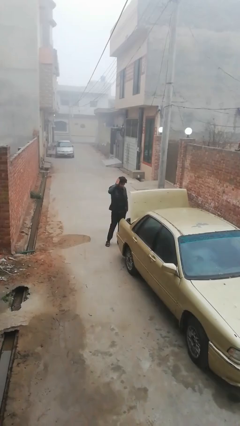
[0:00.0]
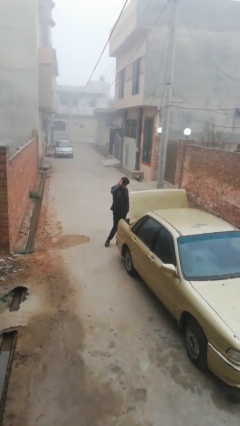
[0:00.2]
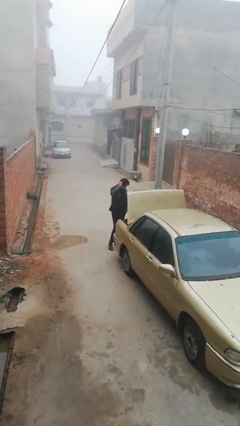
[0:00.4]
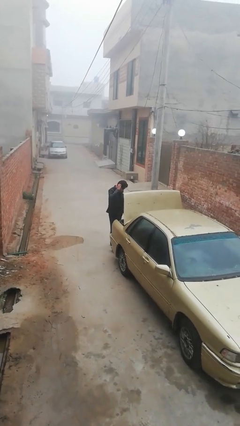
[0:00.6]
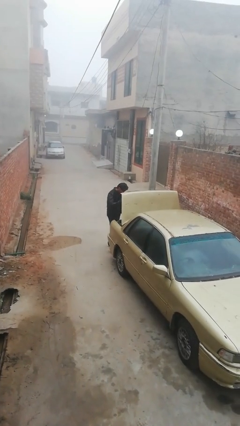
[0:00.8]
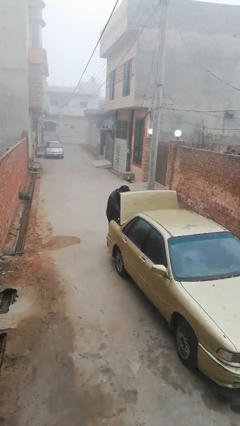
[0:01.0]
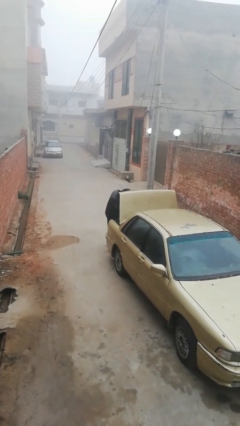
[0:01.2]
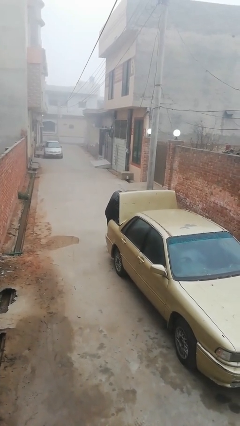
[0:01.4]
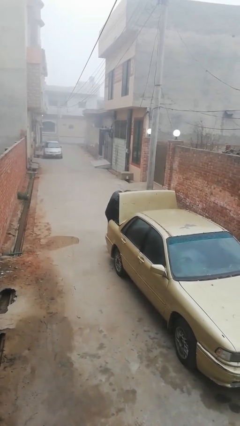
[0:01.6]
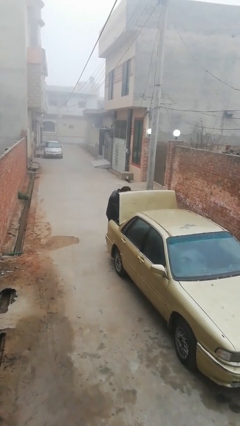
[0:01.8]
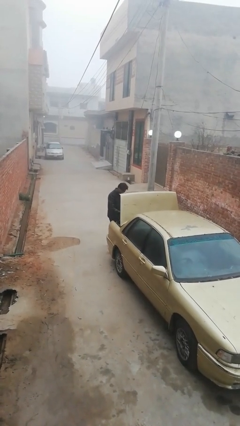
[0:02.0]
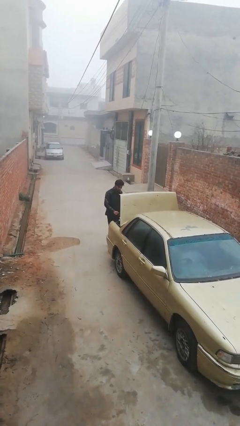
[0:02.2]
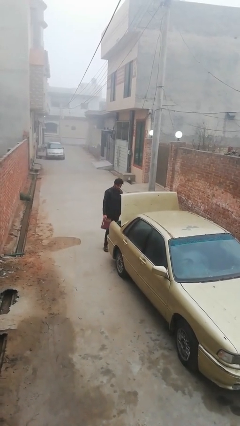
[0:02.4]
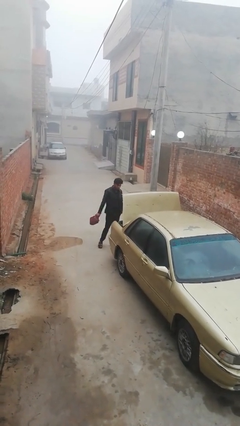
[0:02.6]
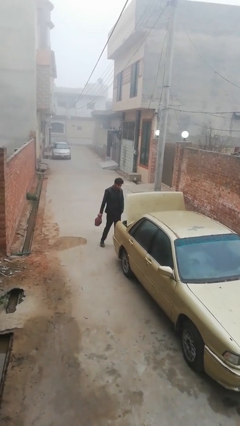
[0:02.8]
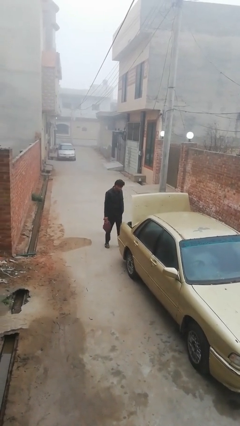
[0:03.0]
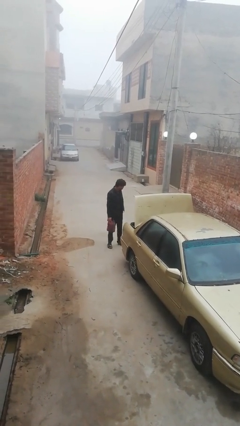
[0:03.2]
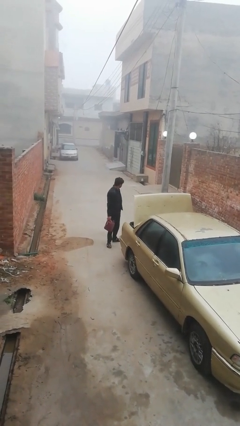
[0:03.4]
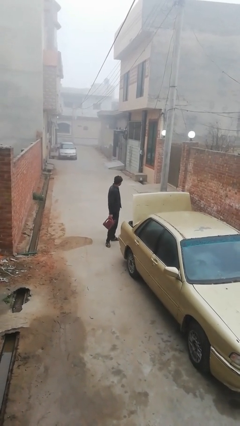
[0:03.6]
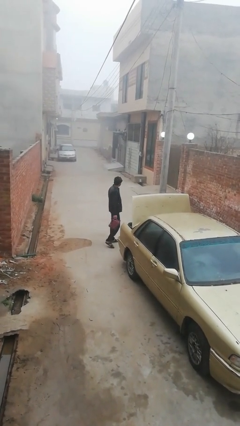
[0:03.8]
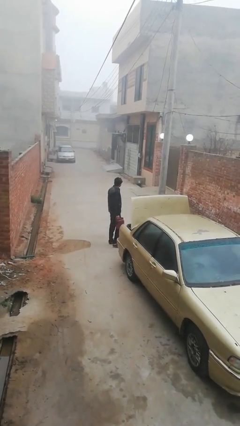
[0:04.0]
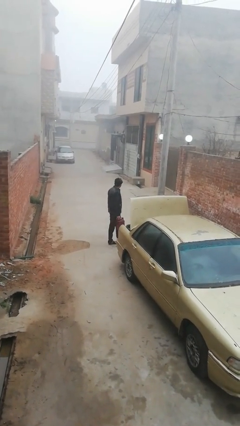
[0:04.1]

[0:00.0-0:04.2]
person unloads car

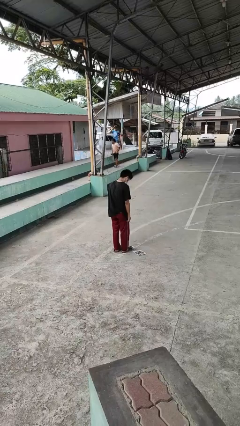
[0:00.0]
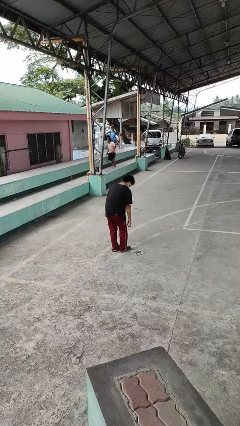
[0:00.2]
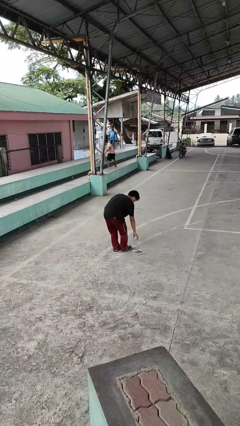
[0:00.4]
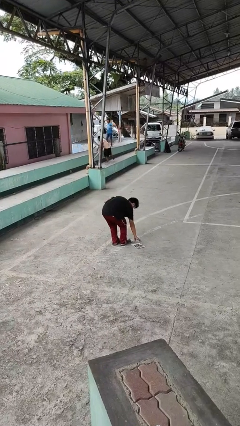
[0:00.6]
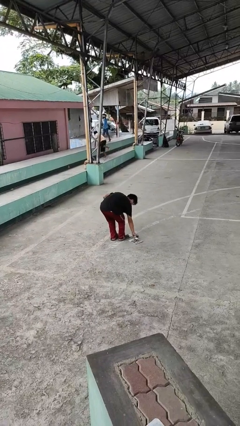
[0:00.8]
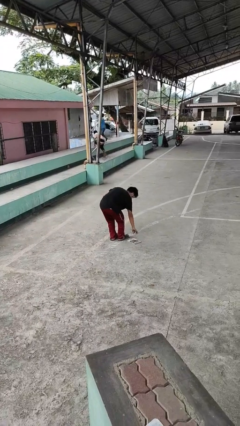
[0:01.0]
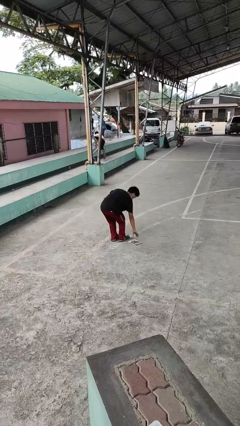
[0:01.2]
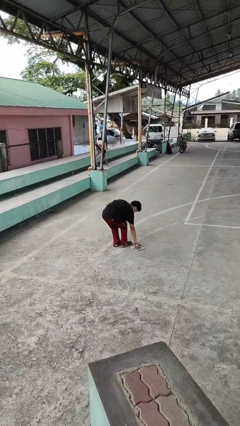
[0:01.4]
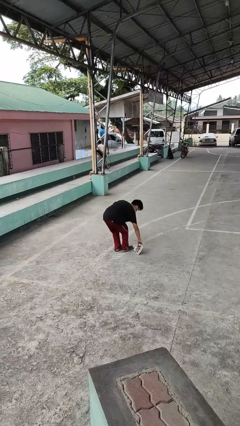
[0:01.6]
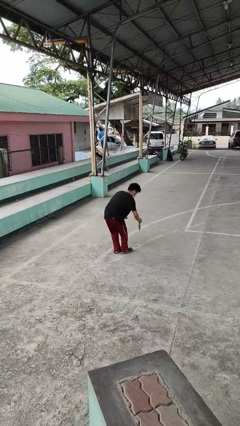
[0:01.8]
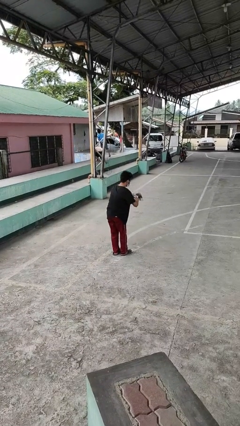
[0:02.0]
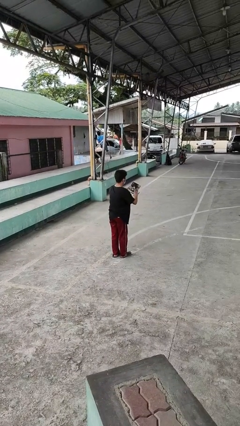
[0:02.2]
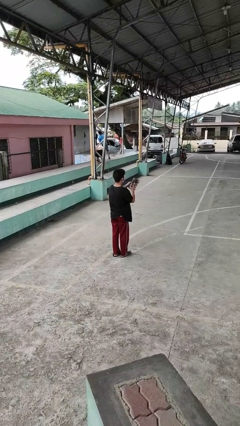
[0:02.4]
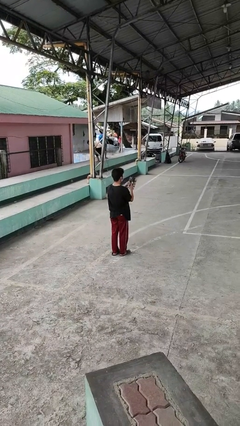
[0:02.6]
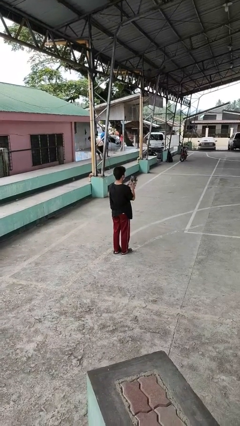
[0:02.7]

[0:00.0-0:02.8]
person picks up object from floor

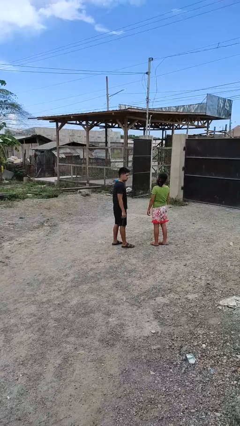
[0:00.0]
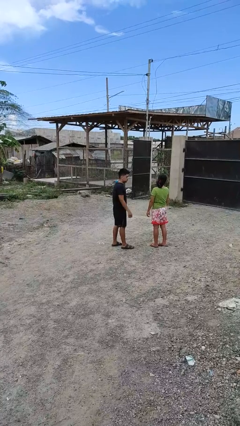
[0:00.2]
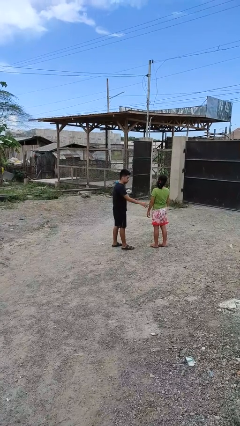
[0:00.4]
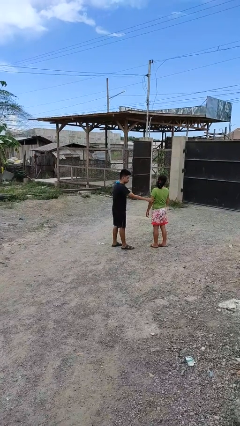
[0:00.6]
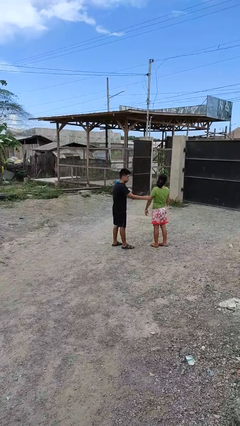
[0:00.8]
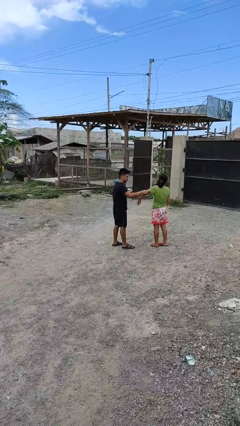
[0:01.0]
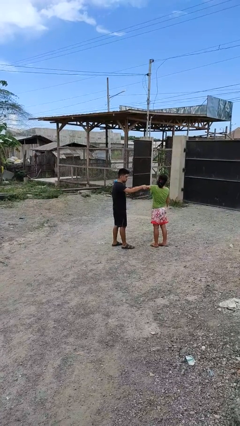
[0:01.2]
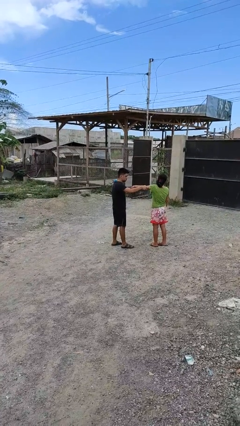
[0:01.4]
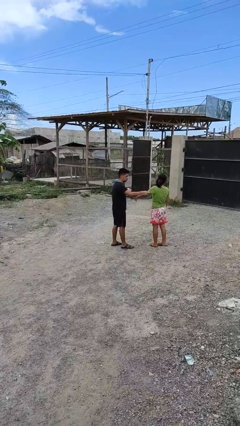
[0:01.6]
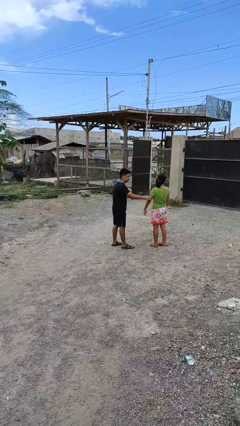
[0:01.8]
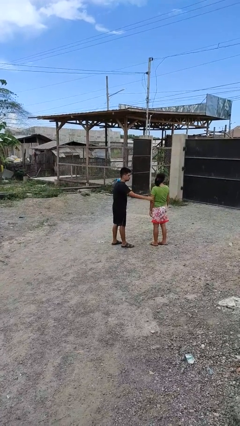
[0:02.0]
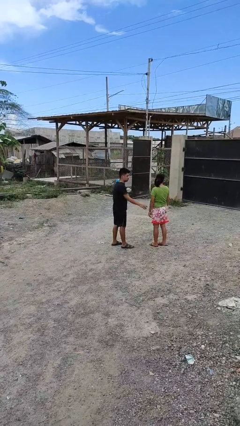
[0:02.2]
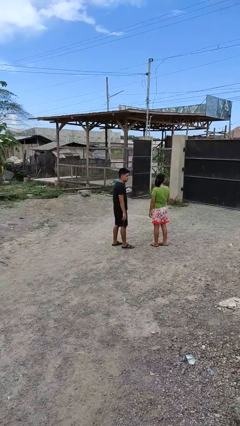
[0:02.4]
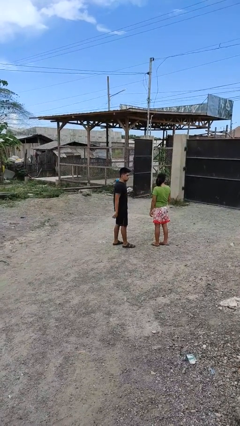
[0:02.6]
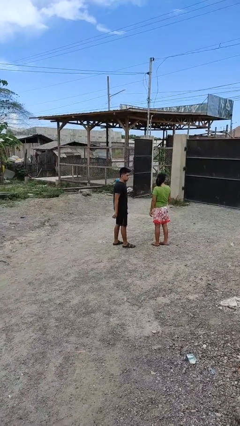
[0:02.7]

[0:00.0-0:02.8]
person grabs person by bicep

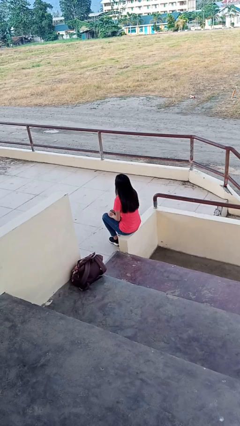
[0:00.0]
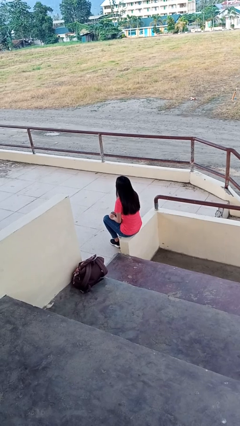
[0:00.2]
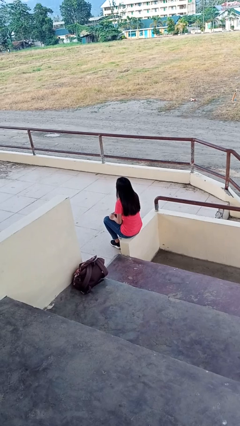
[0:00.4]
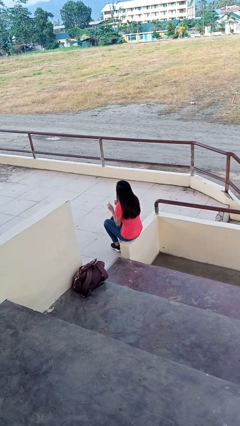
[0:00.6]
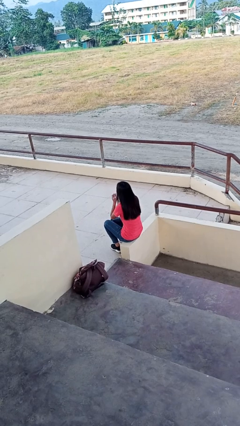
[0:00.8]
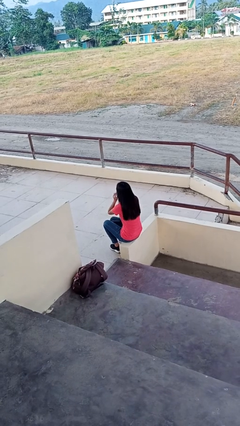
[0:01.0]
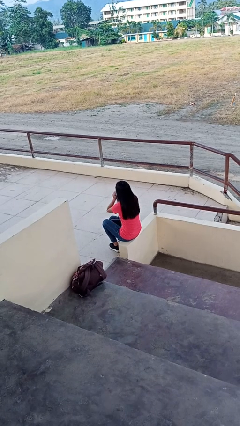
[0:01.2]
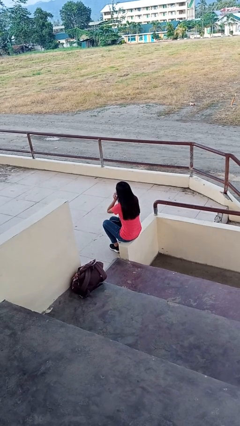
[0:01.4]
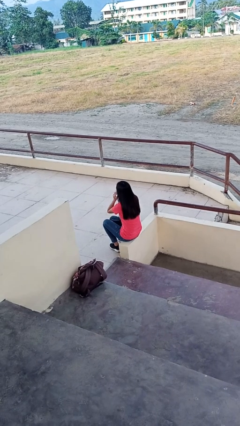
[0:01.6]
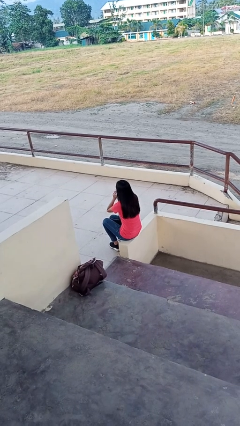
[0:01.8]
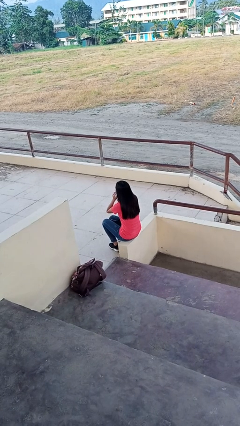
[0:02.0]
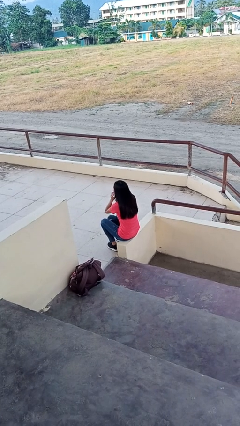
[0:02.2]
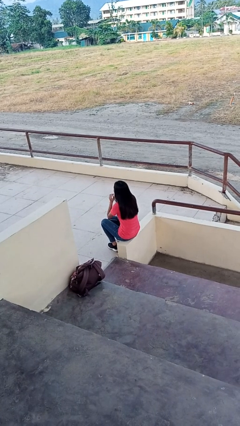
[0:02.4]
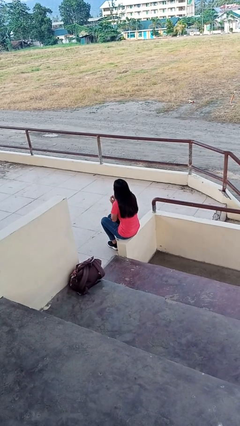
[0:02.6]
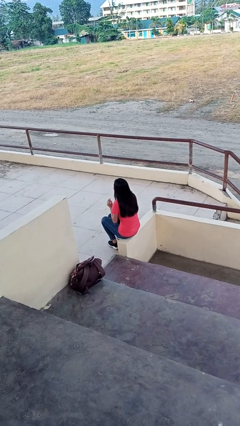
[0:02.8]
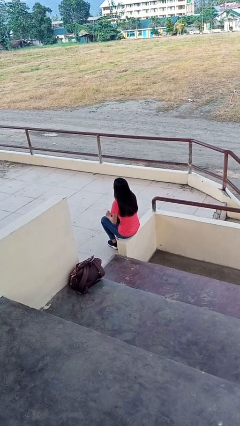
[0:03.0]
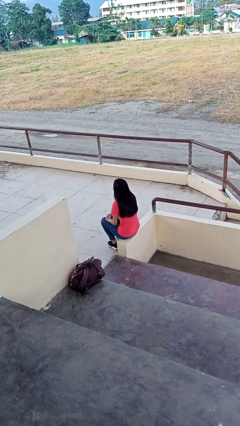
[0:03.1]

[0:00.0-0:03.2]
person puts on headphones

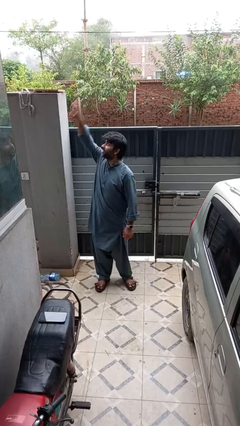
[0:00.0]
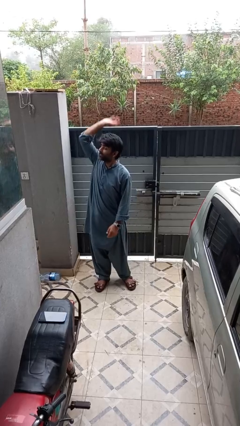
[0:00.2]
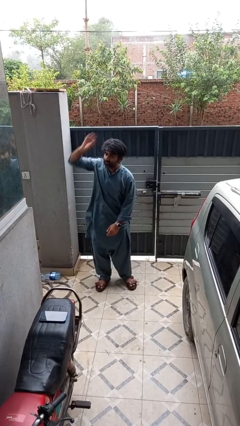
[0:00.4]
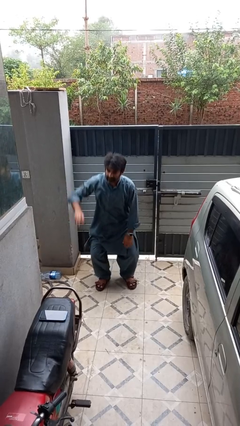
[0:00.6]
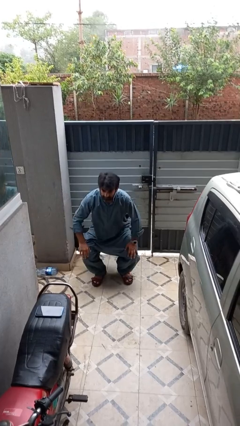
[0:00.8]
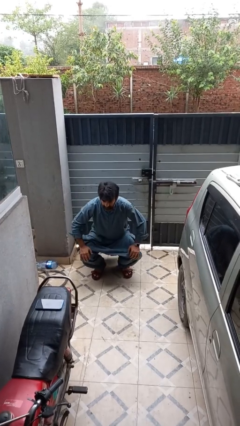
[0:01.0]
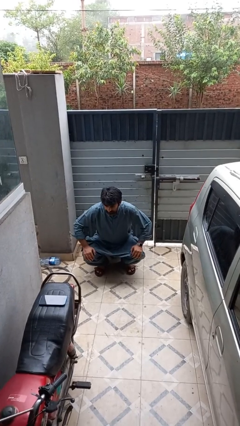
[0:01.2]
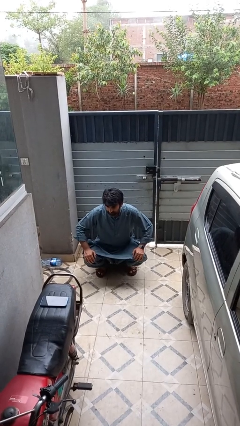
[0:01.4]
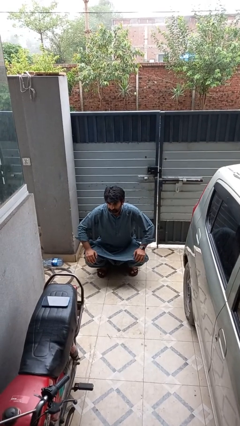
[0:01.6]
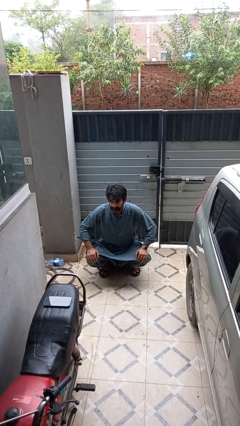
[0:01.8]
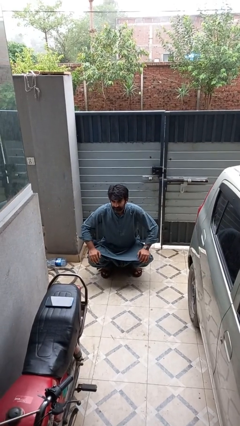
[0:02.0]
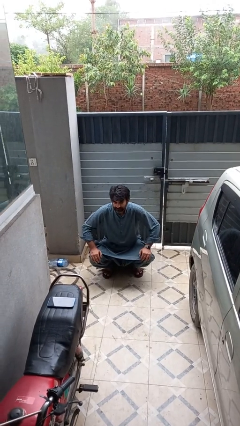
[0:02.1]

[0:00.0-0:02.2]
person squats

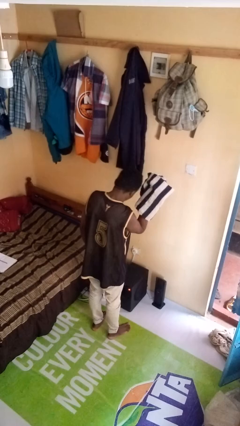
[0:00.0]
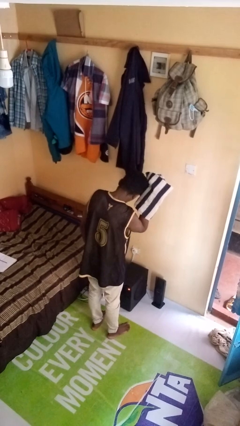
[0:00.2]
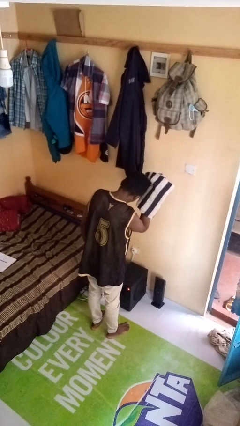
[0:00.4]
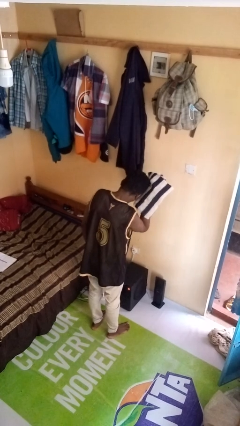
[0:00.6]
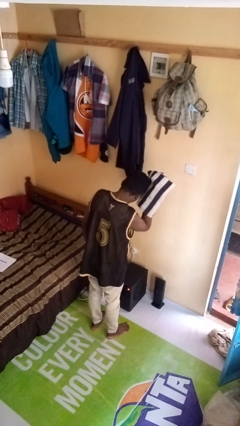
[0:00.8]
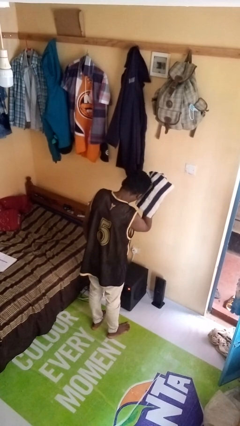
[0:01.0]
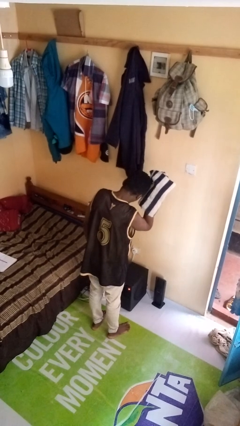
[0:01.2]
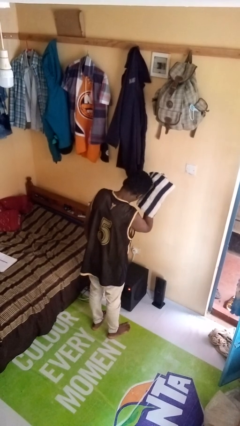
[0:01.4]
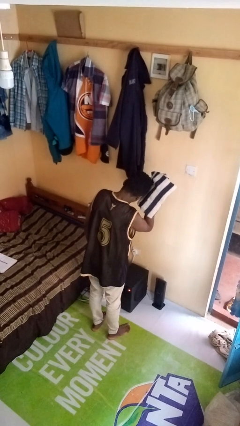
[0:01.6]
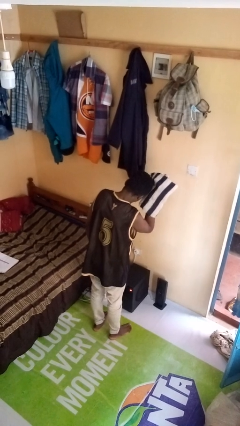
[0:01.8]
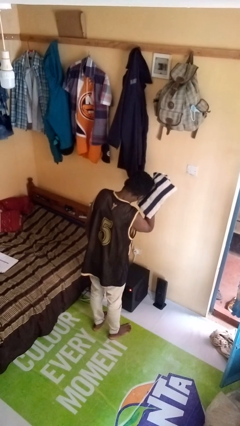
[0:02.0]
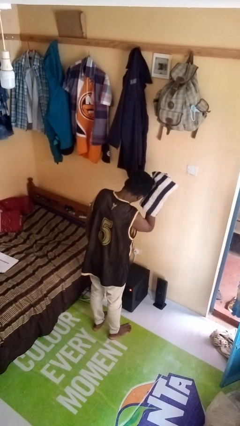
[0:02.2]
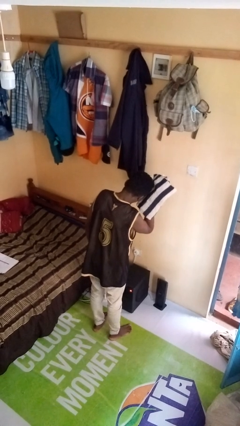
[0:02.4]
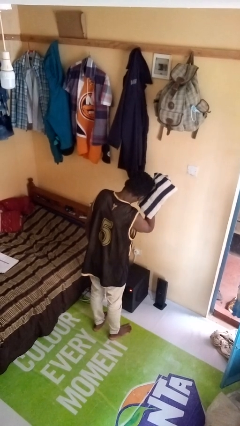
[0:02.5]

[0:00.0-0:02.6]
person dries hair with towel
